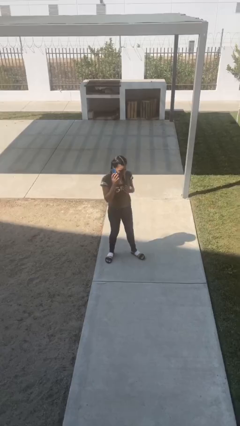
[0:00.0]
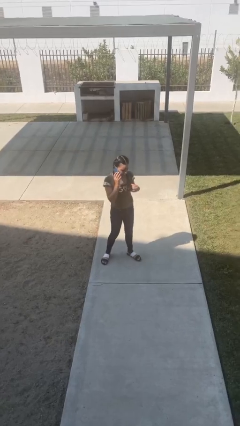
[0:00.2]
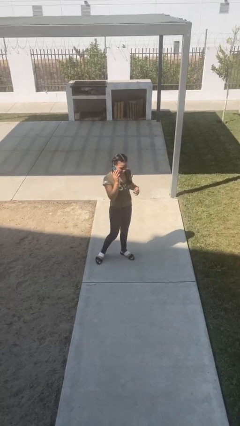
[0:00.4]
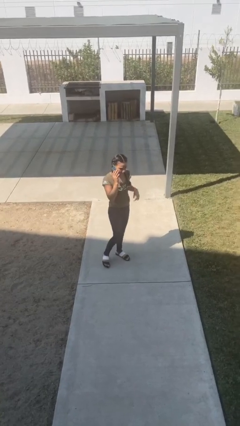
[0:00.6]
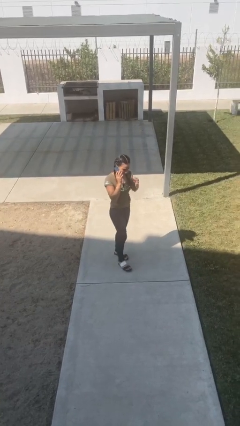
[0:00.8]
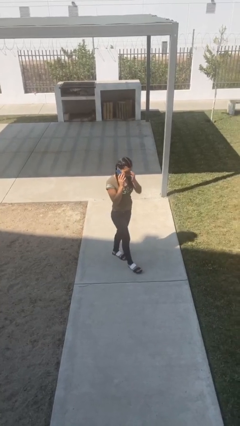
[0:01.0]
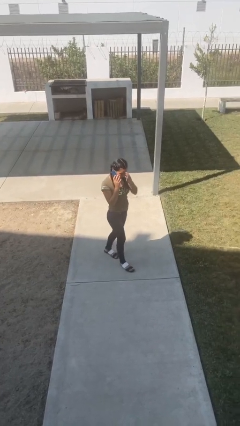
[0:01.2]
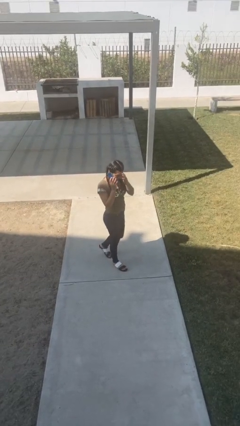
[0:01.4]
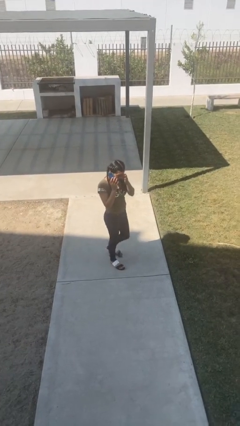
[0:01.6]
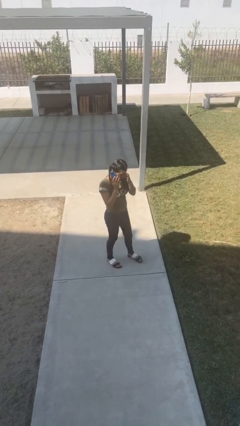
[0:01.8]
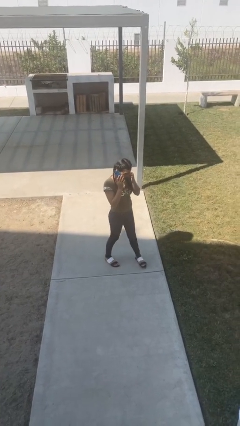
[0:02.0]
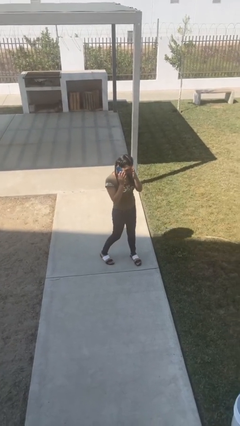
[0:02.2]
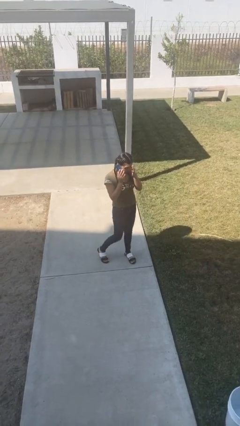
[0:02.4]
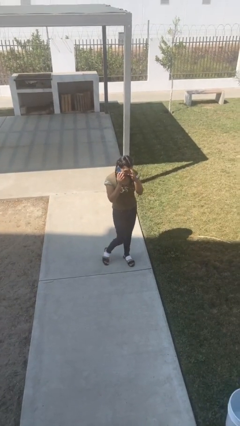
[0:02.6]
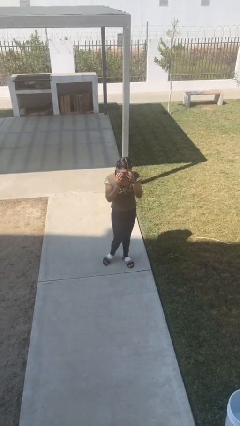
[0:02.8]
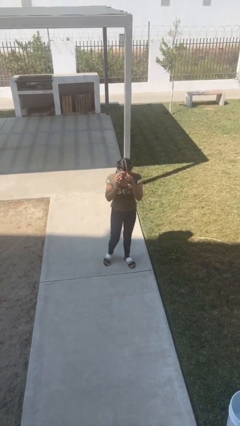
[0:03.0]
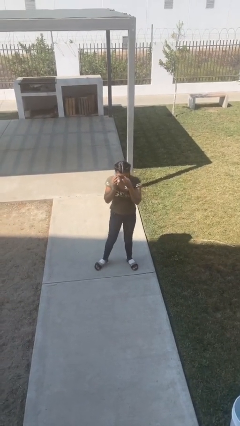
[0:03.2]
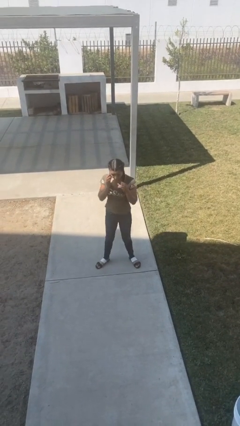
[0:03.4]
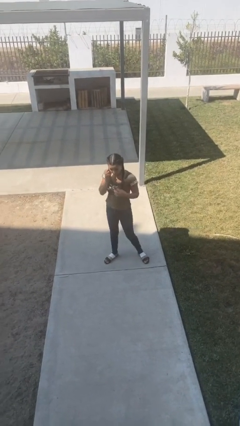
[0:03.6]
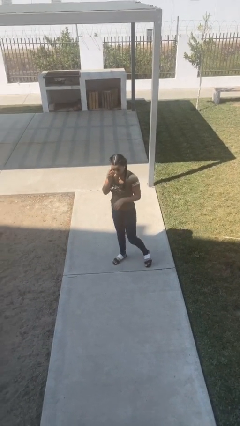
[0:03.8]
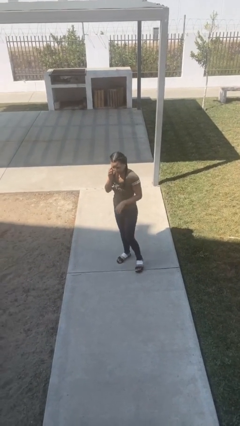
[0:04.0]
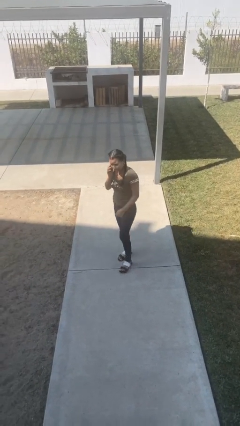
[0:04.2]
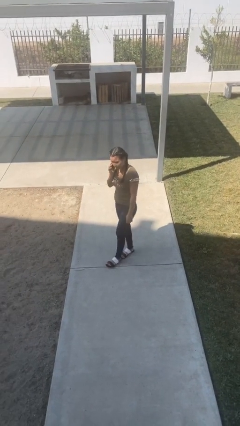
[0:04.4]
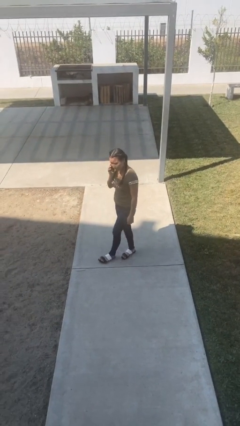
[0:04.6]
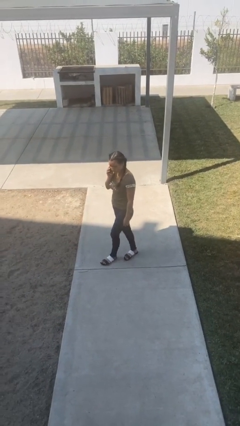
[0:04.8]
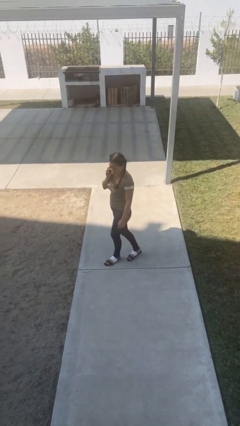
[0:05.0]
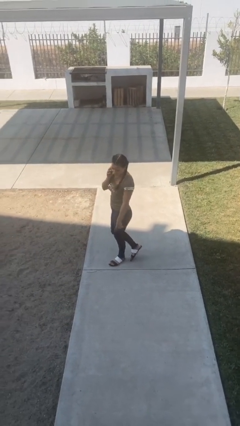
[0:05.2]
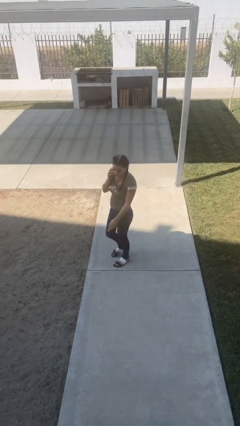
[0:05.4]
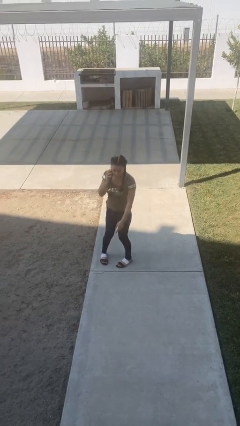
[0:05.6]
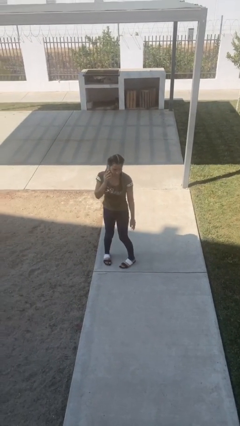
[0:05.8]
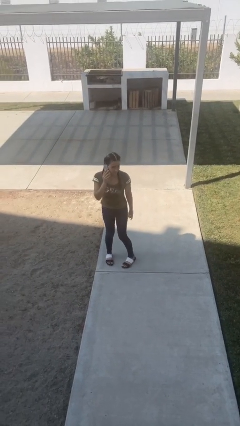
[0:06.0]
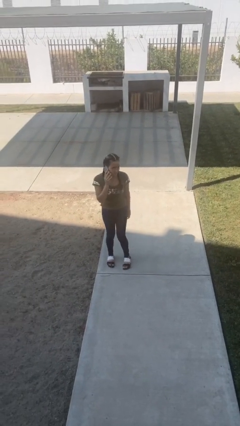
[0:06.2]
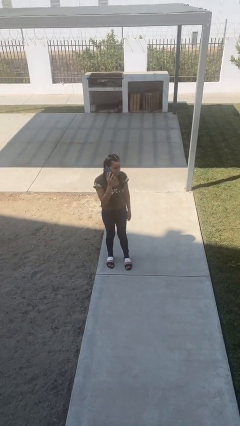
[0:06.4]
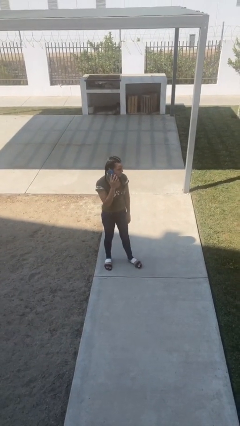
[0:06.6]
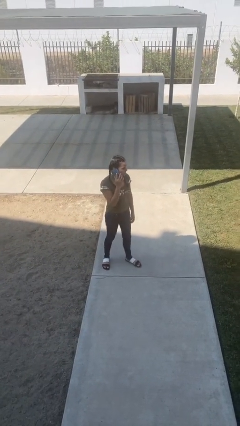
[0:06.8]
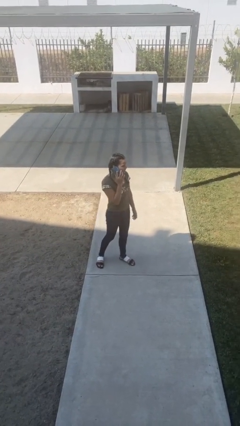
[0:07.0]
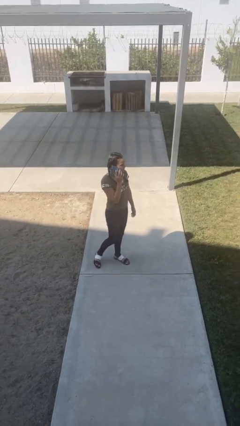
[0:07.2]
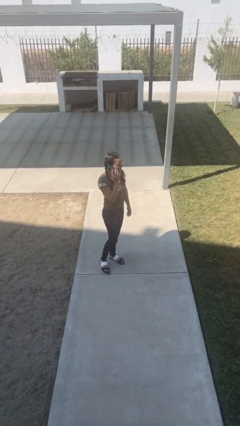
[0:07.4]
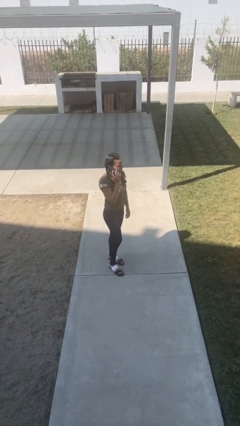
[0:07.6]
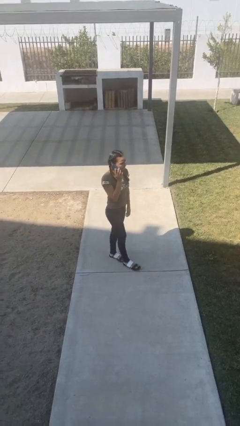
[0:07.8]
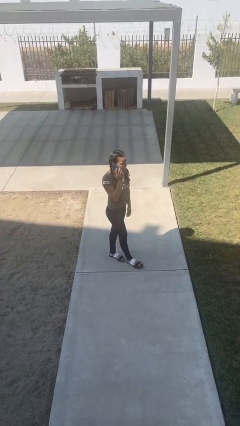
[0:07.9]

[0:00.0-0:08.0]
person talks on phone

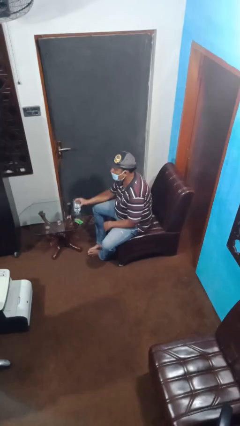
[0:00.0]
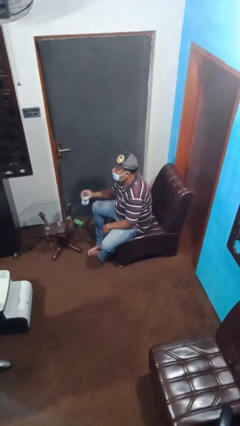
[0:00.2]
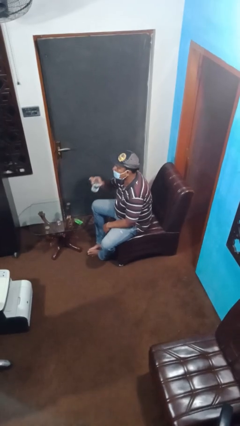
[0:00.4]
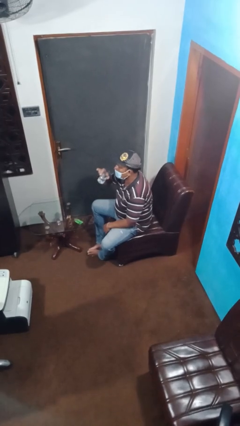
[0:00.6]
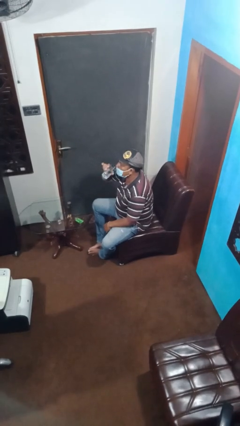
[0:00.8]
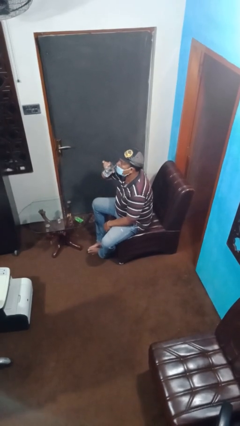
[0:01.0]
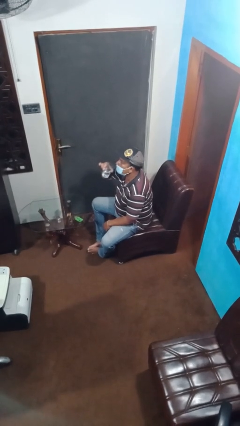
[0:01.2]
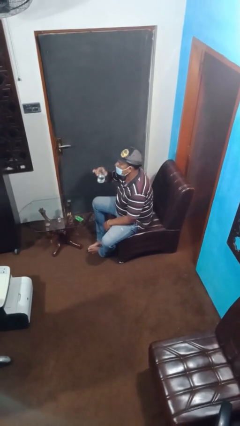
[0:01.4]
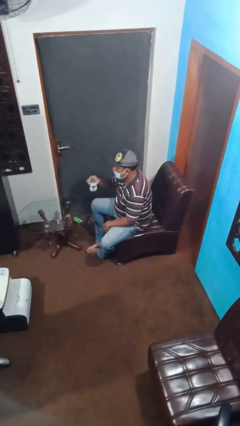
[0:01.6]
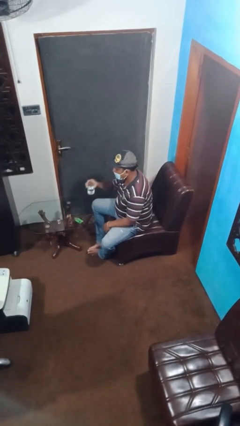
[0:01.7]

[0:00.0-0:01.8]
person drinks from cup

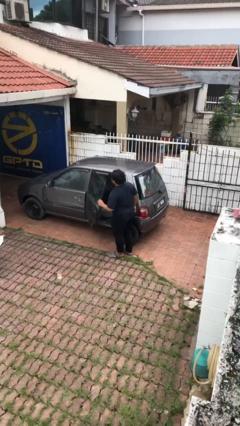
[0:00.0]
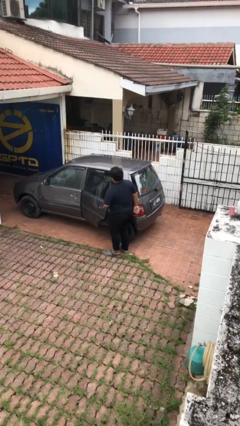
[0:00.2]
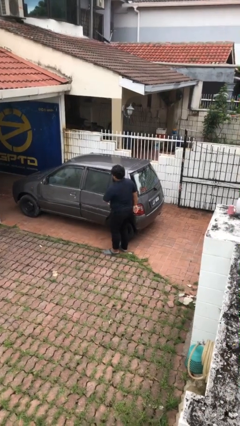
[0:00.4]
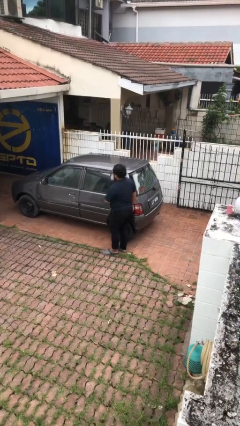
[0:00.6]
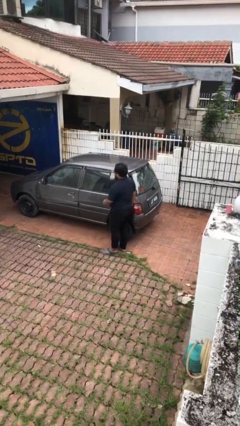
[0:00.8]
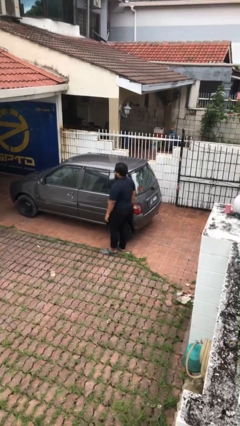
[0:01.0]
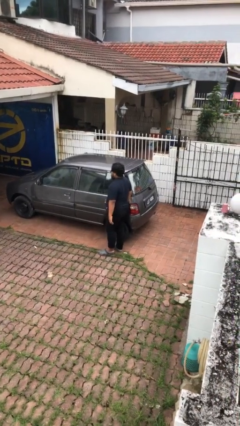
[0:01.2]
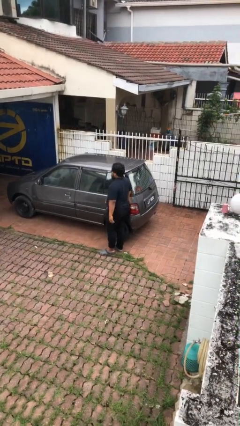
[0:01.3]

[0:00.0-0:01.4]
person closes car door

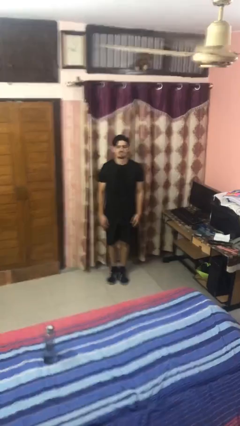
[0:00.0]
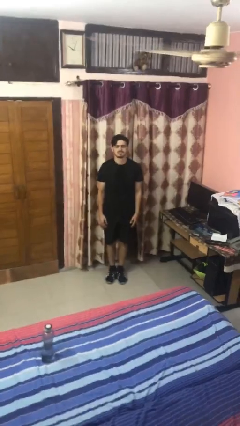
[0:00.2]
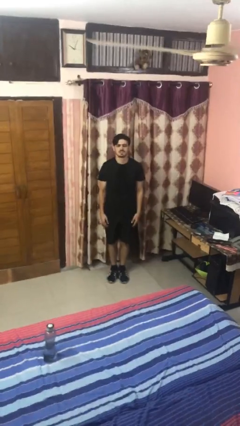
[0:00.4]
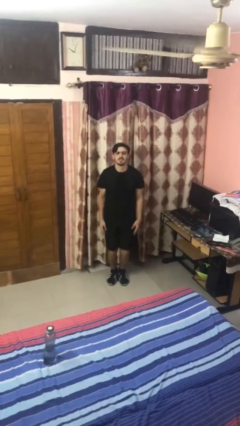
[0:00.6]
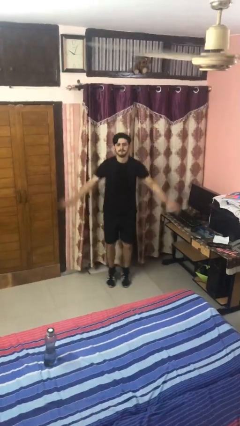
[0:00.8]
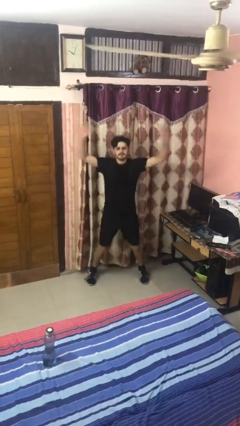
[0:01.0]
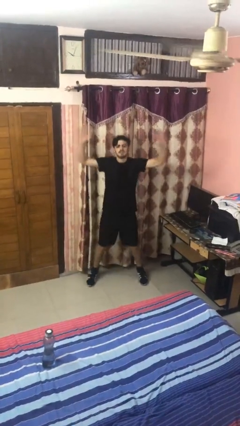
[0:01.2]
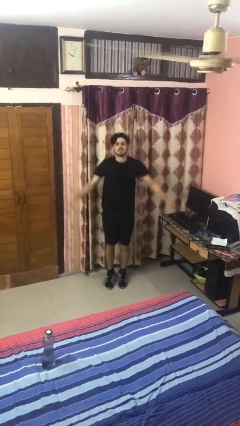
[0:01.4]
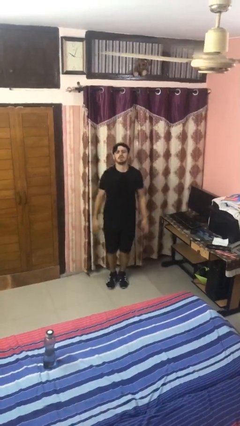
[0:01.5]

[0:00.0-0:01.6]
person exercises with jumping jacks

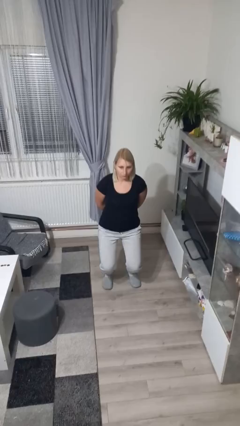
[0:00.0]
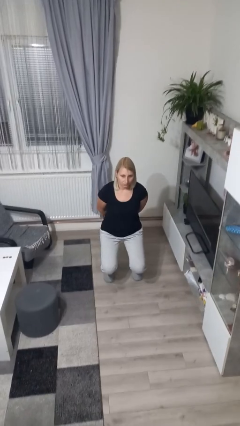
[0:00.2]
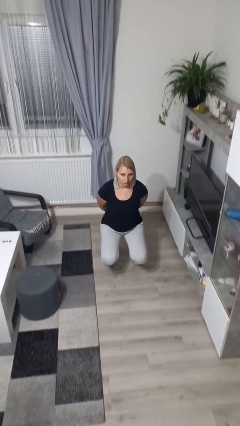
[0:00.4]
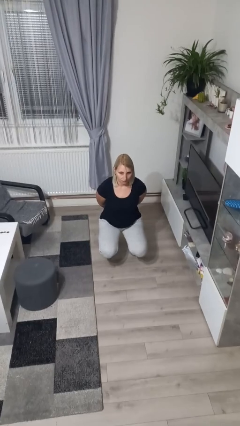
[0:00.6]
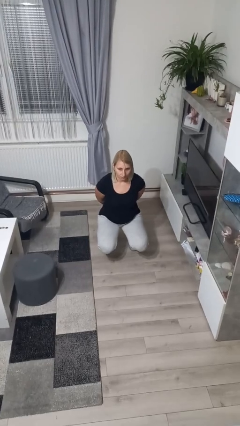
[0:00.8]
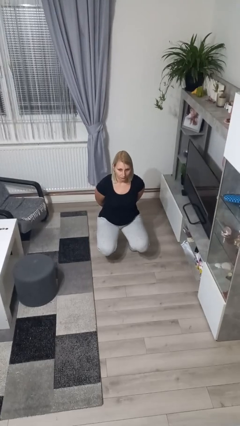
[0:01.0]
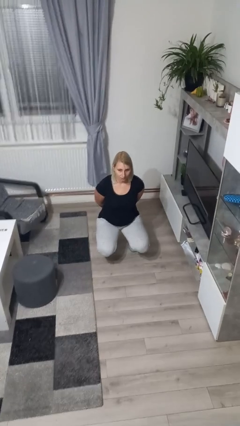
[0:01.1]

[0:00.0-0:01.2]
person squats

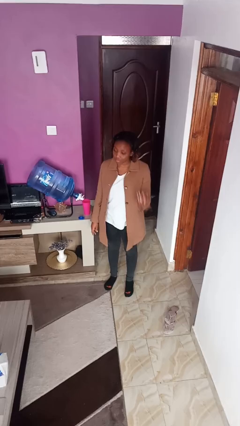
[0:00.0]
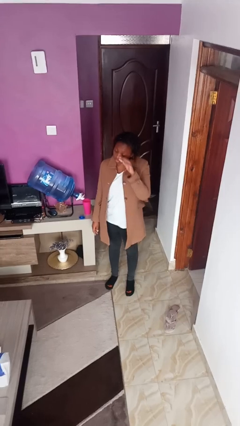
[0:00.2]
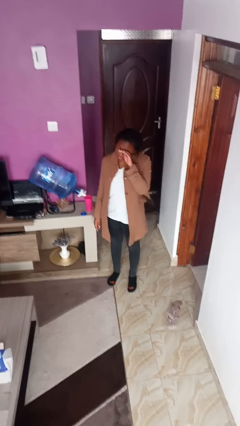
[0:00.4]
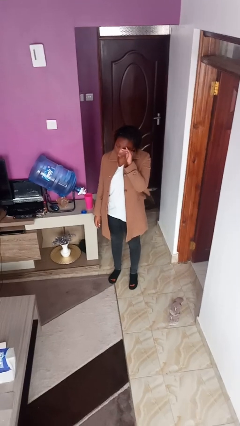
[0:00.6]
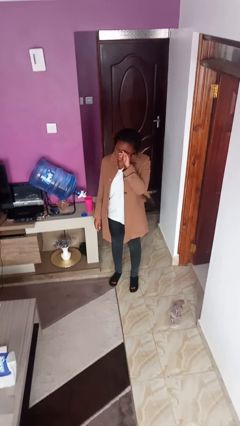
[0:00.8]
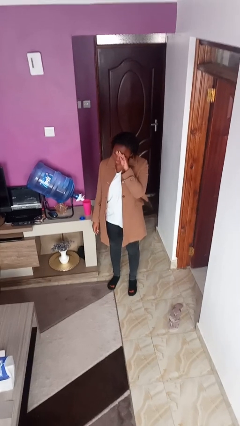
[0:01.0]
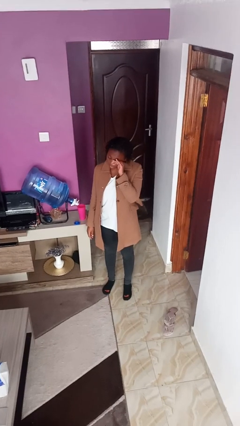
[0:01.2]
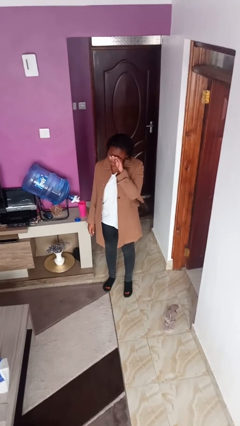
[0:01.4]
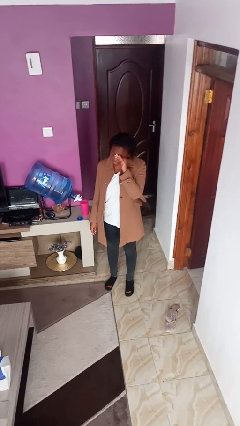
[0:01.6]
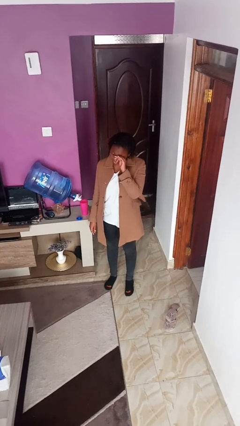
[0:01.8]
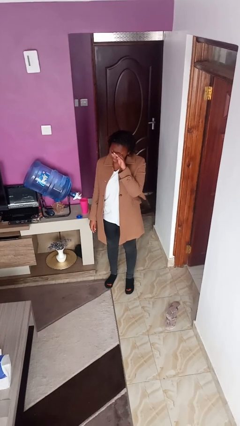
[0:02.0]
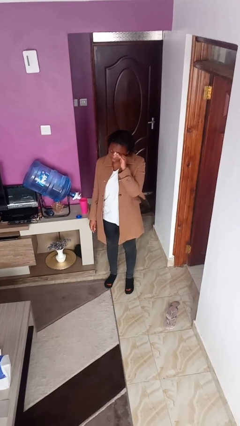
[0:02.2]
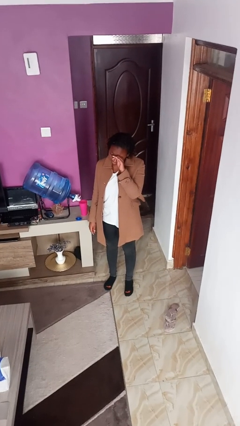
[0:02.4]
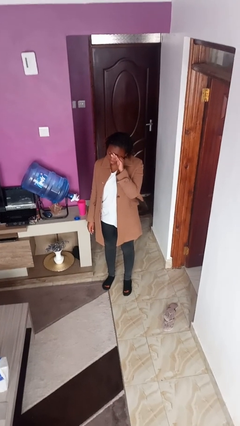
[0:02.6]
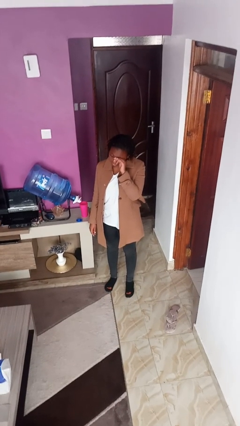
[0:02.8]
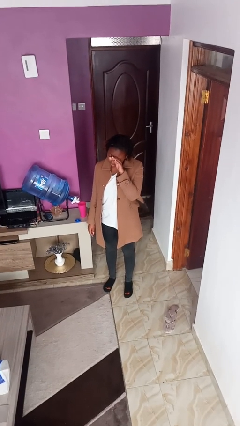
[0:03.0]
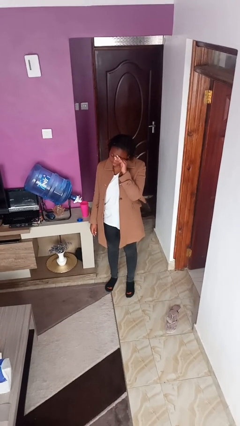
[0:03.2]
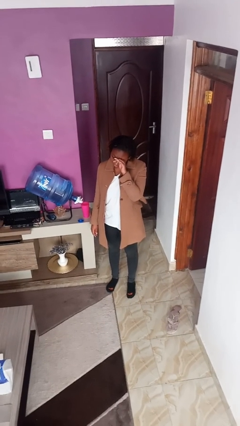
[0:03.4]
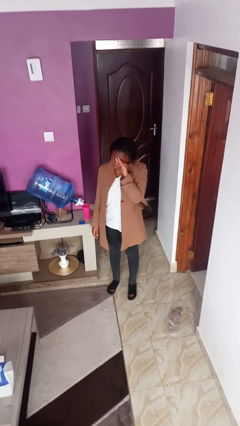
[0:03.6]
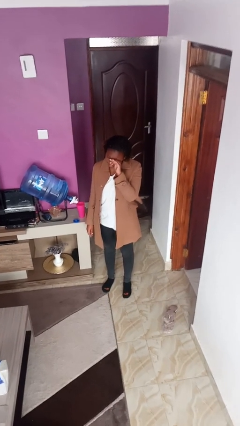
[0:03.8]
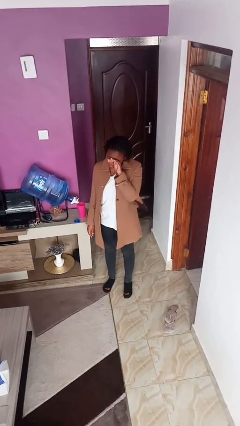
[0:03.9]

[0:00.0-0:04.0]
person scratches face
